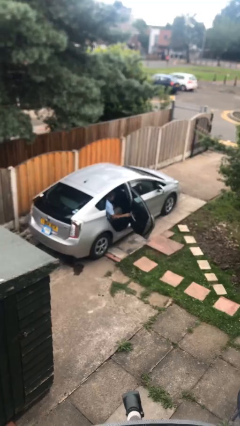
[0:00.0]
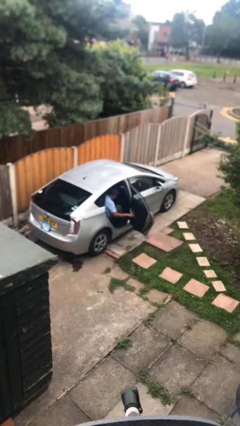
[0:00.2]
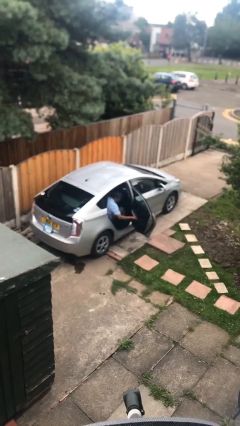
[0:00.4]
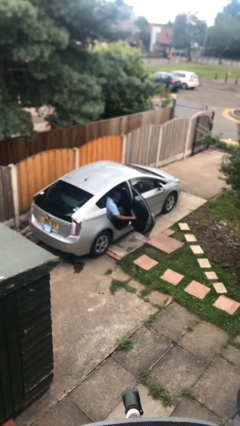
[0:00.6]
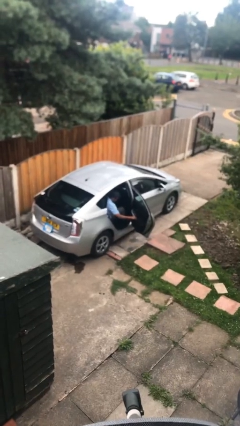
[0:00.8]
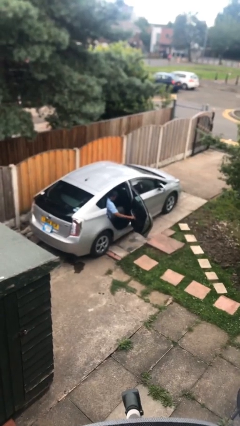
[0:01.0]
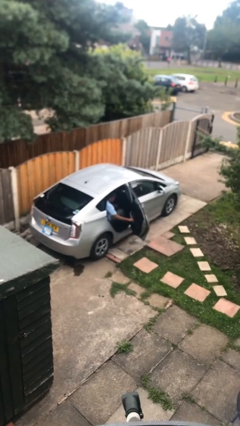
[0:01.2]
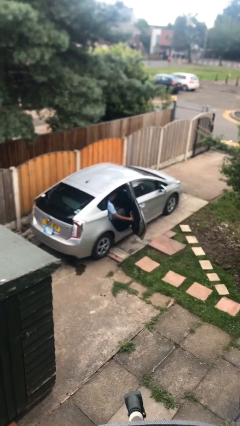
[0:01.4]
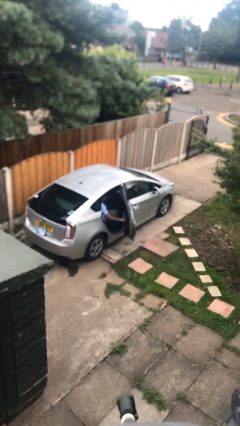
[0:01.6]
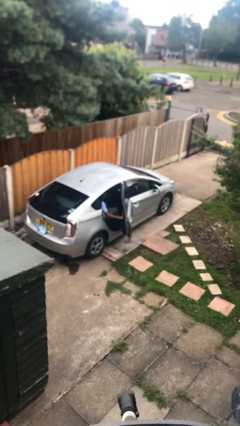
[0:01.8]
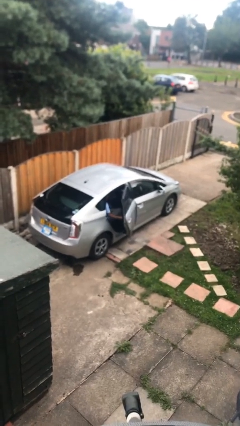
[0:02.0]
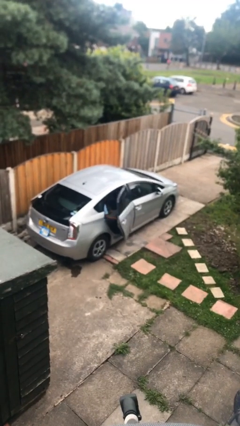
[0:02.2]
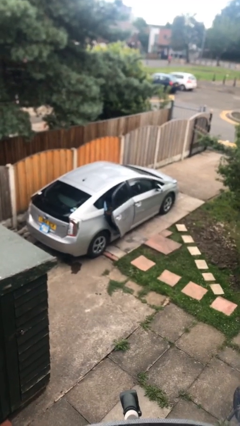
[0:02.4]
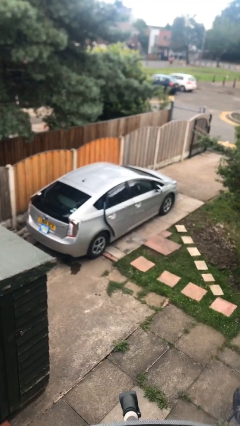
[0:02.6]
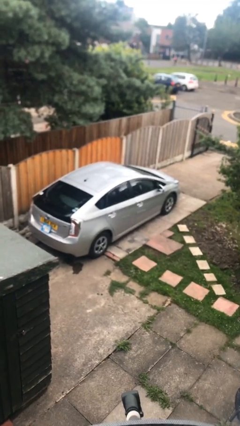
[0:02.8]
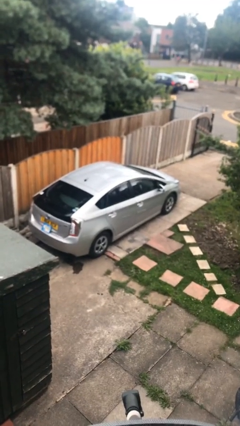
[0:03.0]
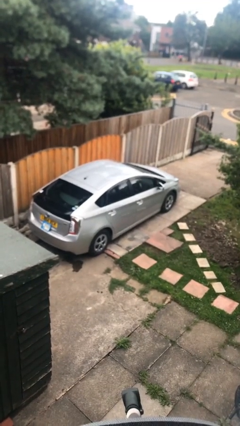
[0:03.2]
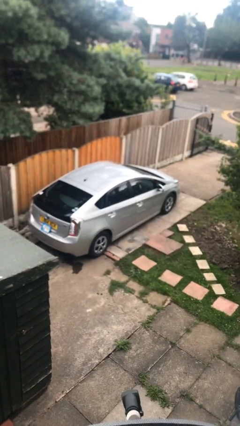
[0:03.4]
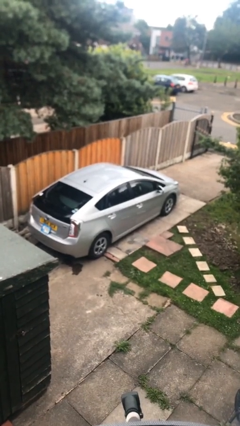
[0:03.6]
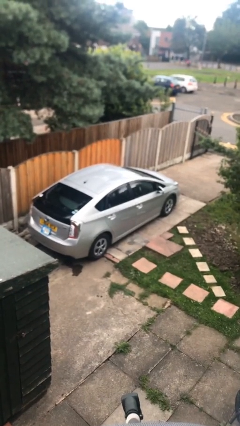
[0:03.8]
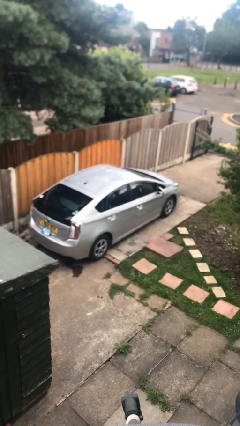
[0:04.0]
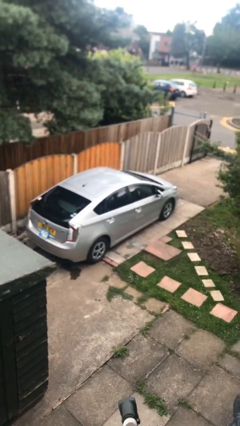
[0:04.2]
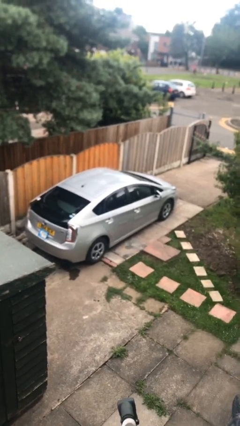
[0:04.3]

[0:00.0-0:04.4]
person closes car door

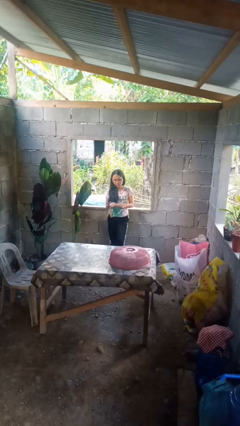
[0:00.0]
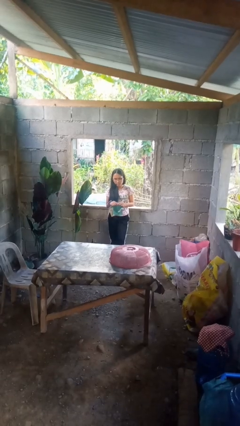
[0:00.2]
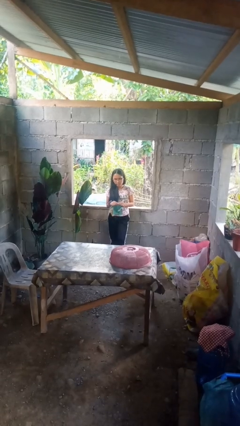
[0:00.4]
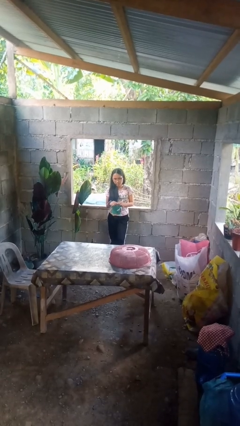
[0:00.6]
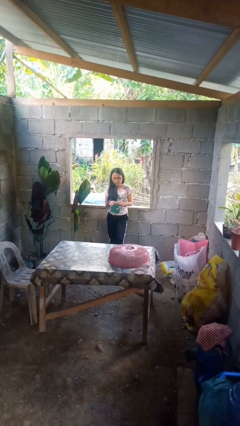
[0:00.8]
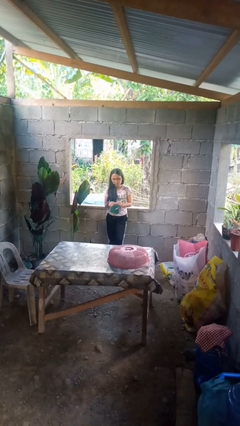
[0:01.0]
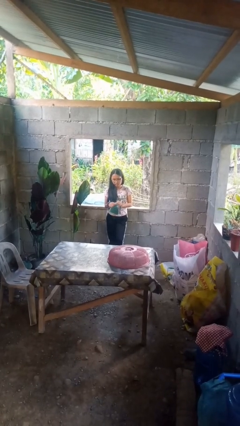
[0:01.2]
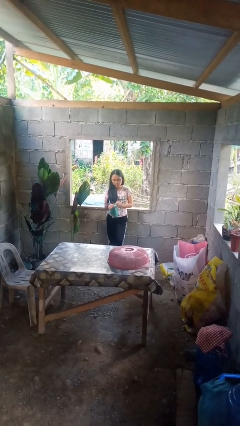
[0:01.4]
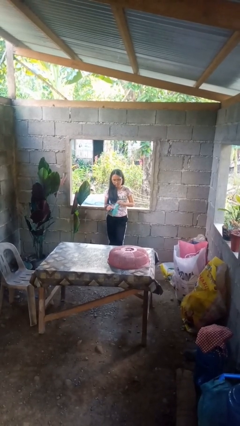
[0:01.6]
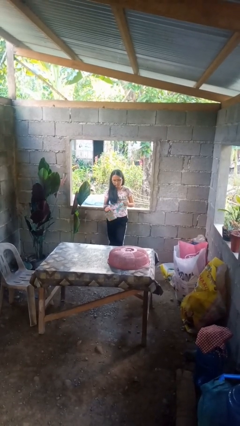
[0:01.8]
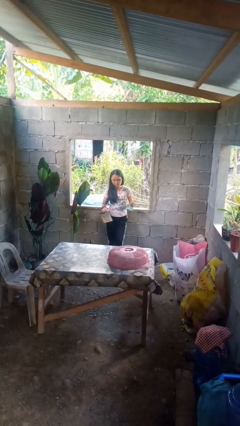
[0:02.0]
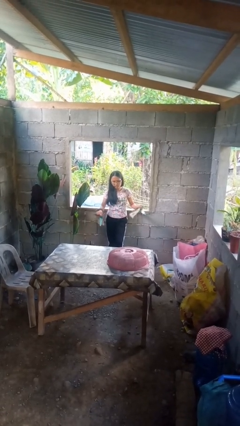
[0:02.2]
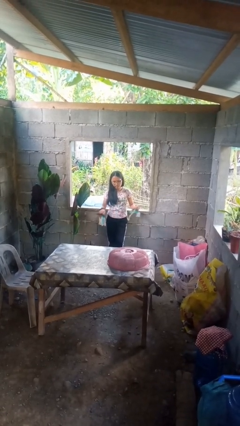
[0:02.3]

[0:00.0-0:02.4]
person tears paper

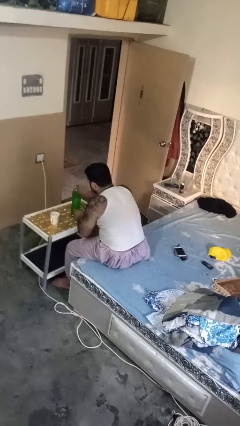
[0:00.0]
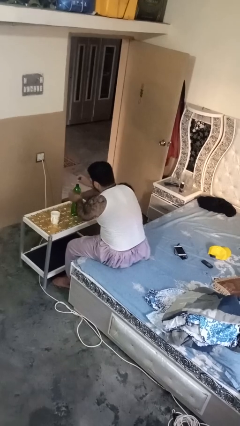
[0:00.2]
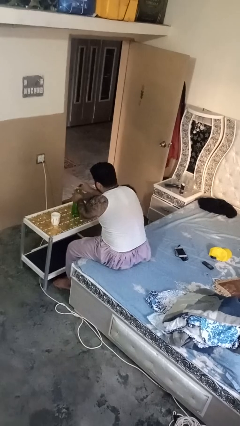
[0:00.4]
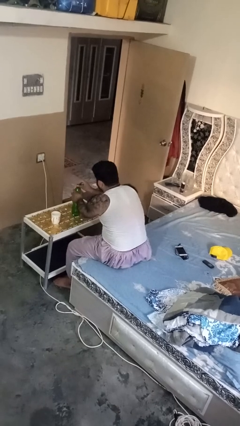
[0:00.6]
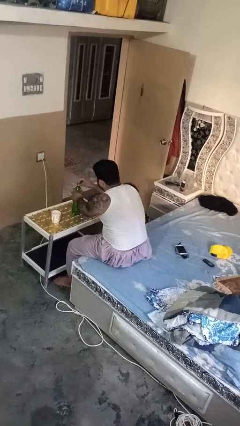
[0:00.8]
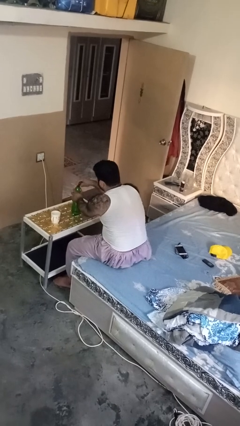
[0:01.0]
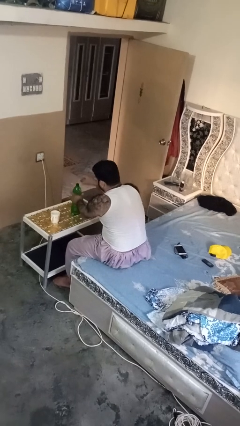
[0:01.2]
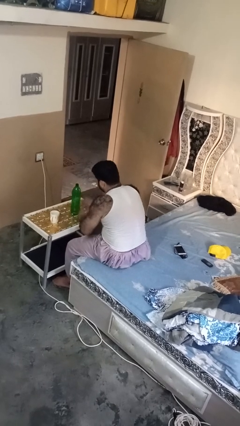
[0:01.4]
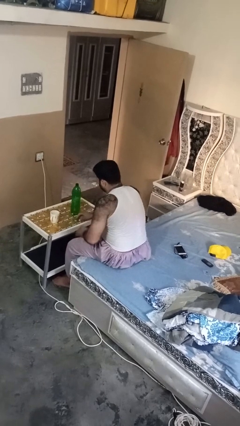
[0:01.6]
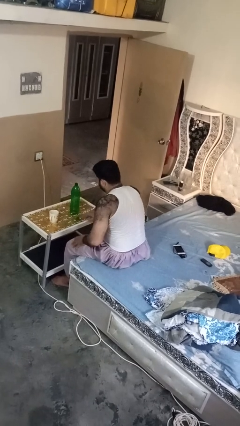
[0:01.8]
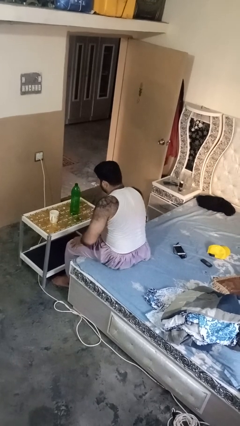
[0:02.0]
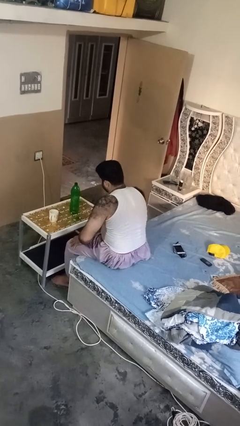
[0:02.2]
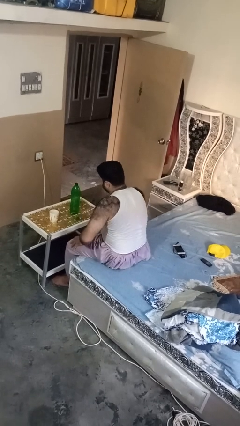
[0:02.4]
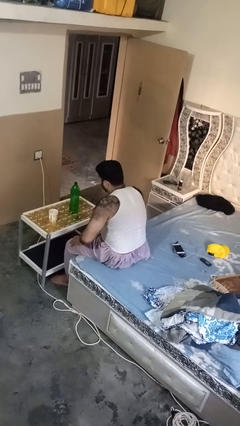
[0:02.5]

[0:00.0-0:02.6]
person unscrews lid from bottle

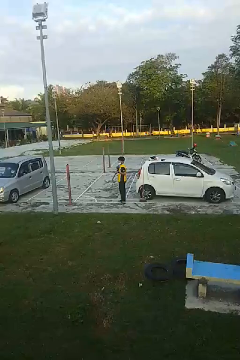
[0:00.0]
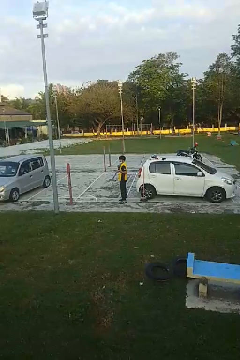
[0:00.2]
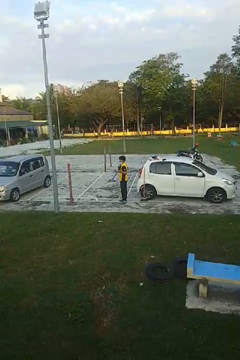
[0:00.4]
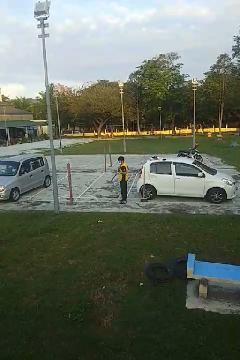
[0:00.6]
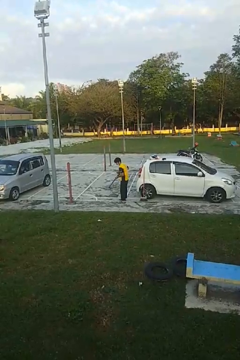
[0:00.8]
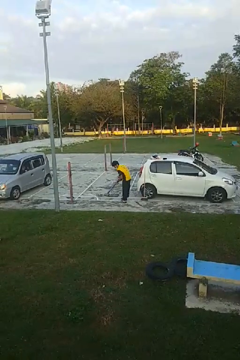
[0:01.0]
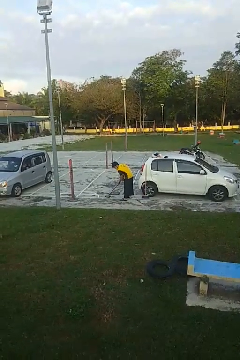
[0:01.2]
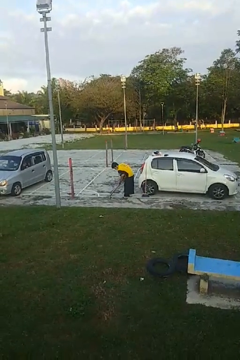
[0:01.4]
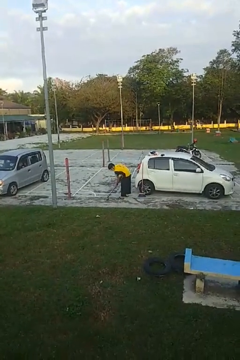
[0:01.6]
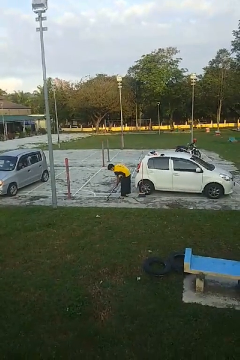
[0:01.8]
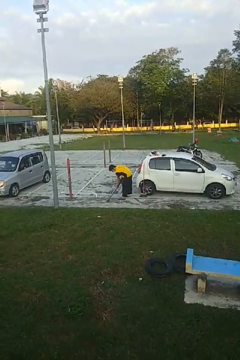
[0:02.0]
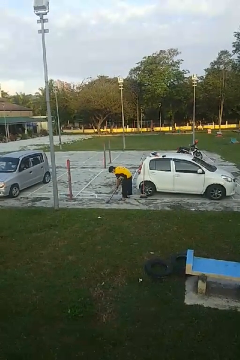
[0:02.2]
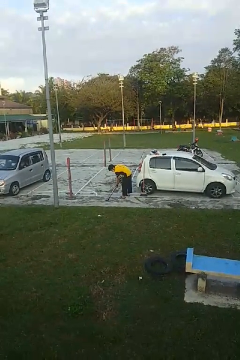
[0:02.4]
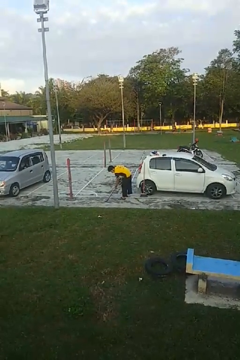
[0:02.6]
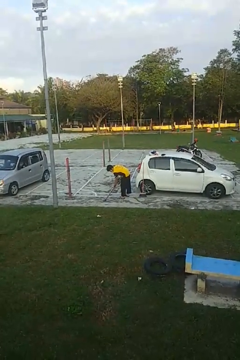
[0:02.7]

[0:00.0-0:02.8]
person vacuums carpet

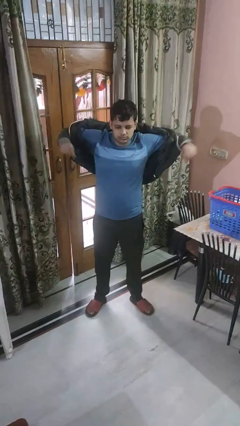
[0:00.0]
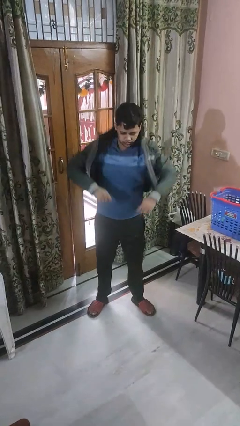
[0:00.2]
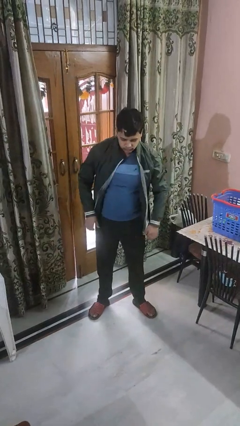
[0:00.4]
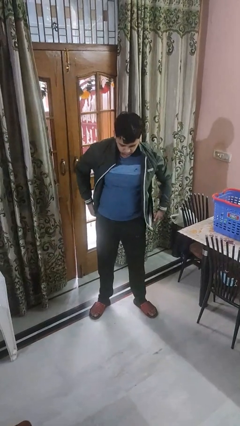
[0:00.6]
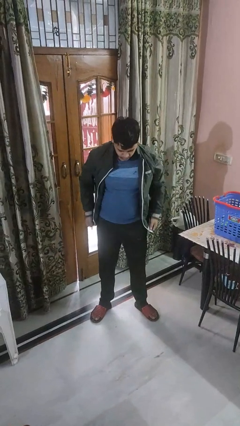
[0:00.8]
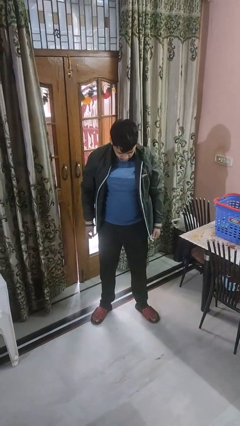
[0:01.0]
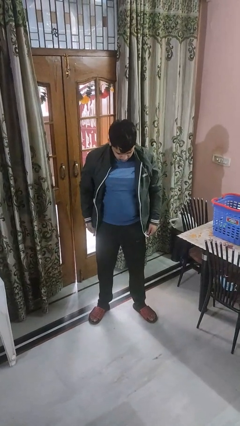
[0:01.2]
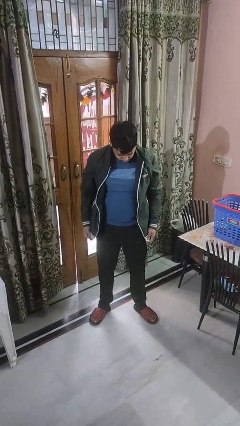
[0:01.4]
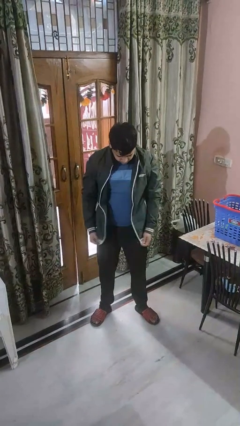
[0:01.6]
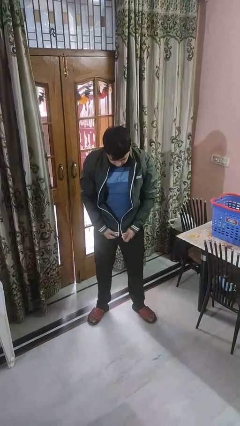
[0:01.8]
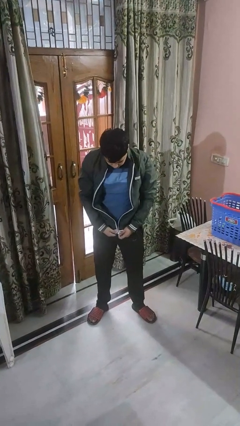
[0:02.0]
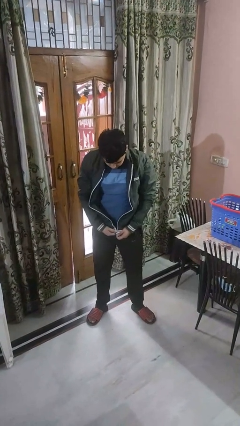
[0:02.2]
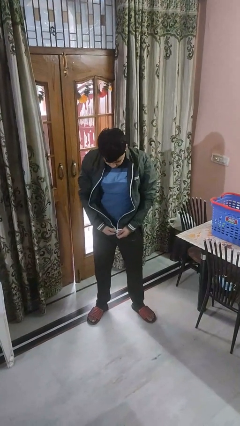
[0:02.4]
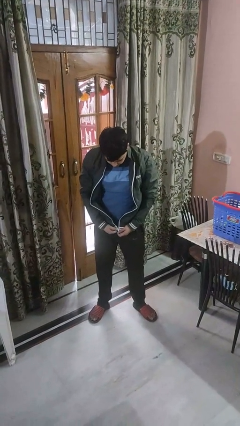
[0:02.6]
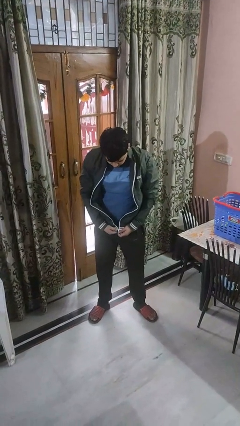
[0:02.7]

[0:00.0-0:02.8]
person puts on jacket

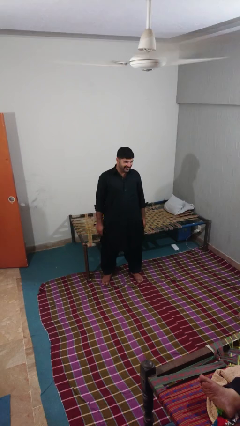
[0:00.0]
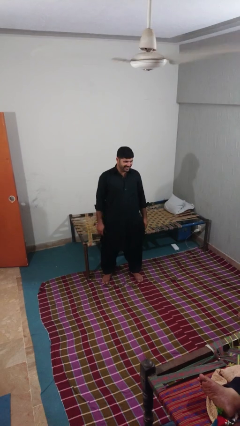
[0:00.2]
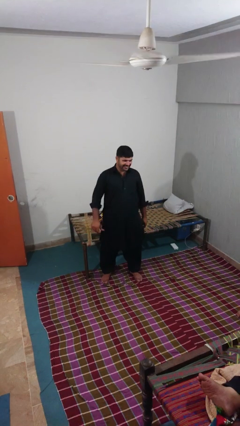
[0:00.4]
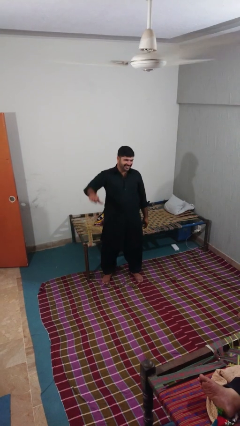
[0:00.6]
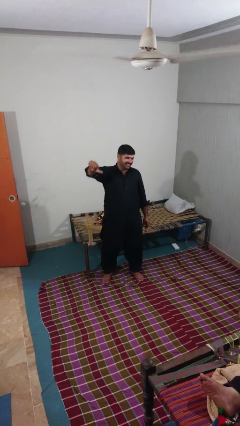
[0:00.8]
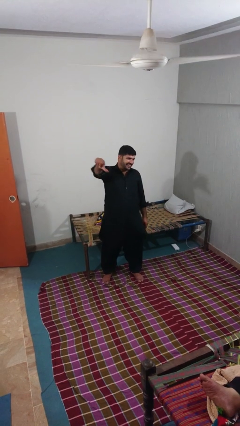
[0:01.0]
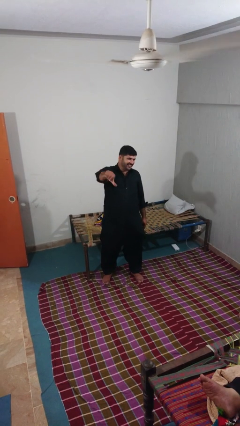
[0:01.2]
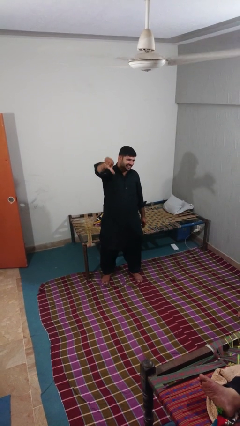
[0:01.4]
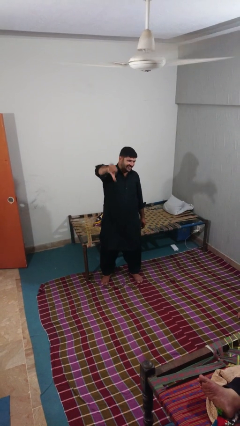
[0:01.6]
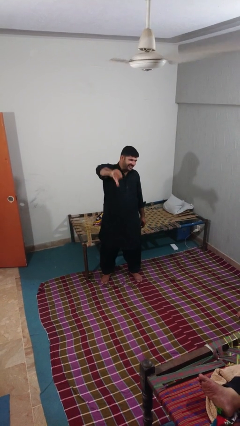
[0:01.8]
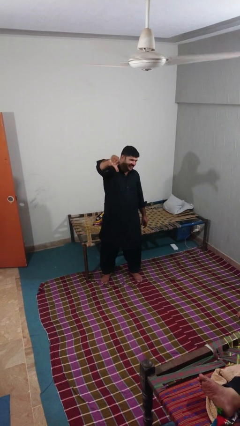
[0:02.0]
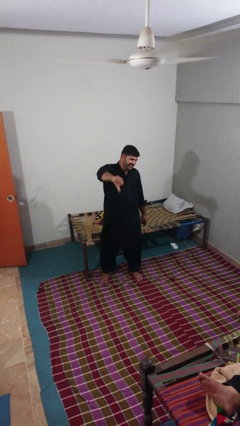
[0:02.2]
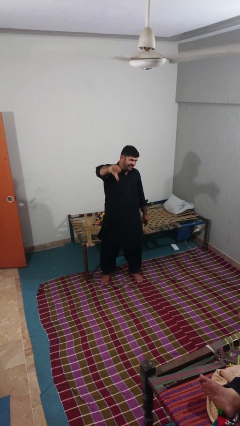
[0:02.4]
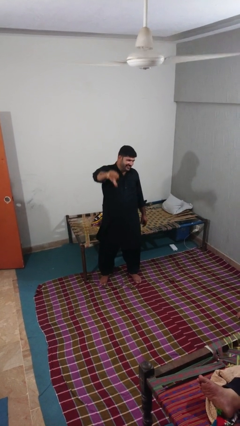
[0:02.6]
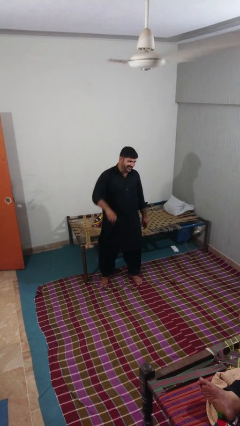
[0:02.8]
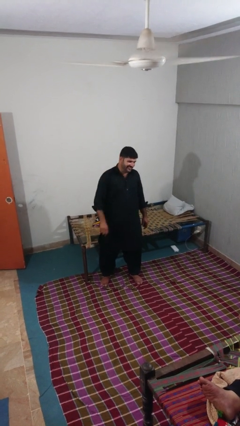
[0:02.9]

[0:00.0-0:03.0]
person gestures thumbs down
